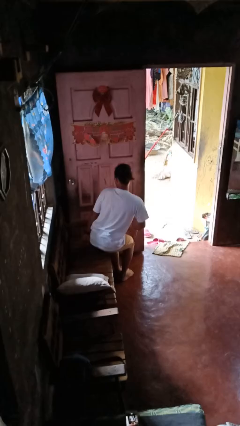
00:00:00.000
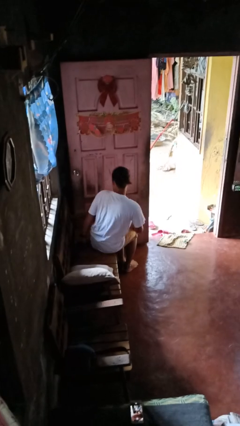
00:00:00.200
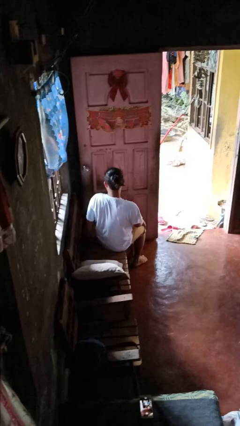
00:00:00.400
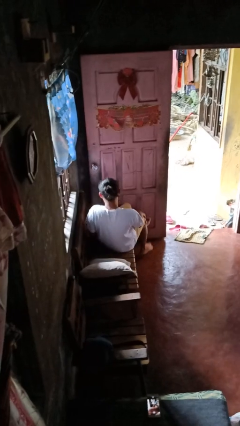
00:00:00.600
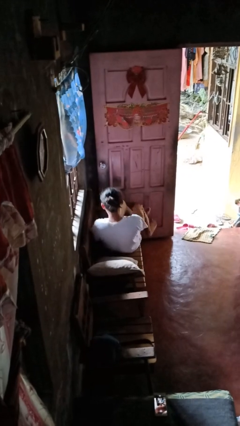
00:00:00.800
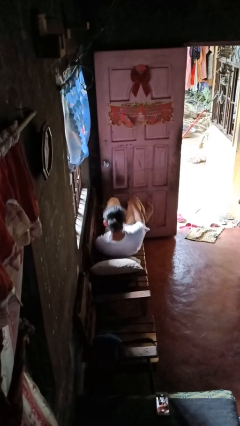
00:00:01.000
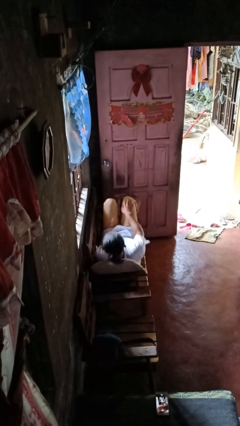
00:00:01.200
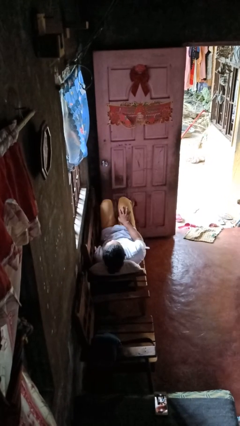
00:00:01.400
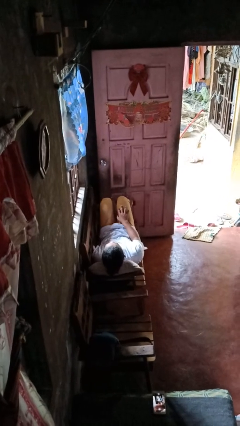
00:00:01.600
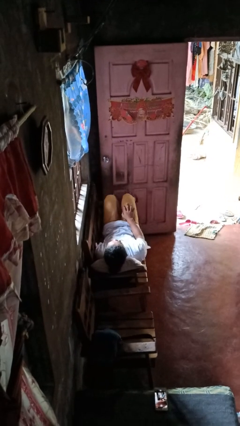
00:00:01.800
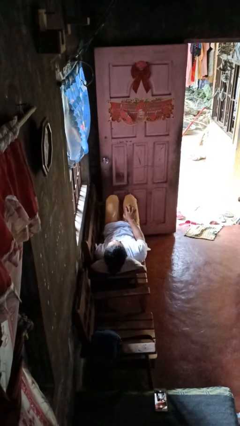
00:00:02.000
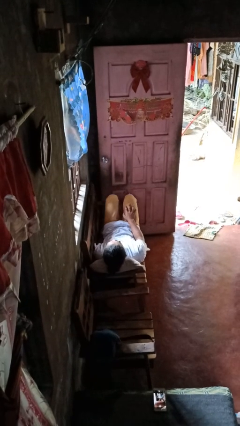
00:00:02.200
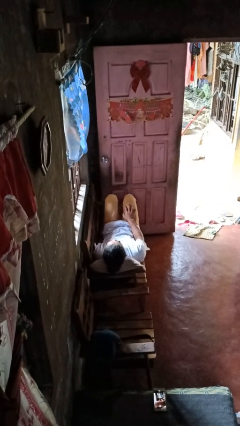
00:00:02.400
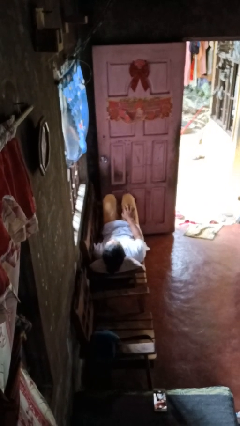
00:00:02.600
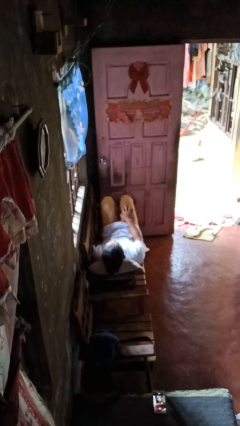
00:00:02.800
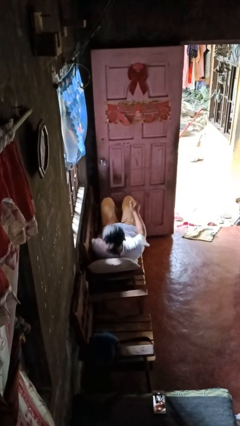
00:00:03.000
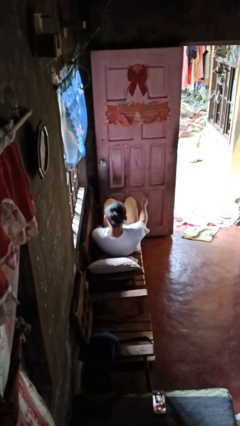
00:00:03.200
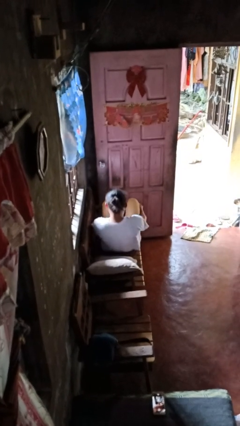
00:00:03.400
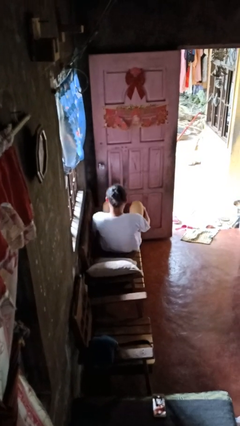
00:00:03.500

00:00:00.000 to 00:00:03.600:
person lies down on couch

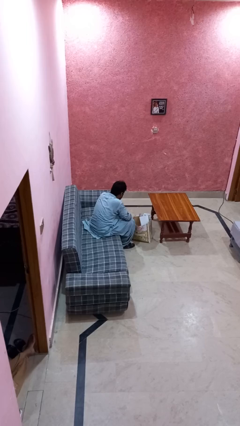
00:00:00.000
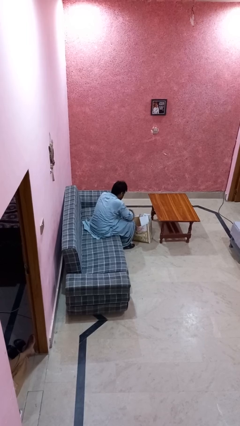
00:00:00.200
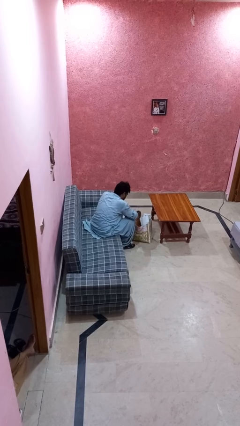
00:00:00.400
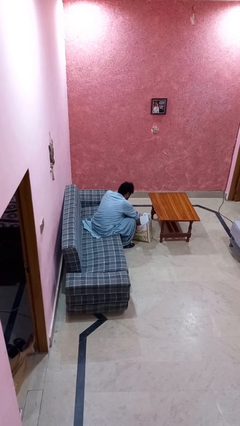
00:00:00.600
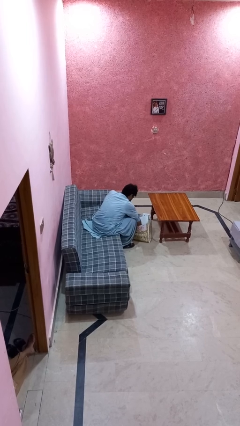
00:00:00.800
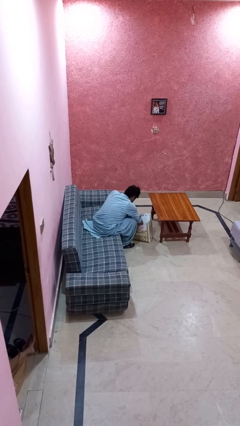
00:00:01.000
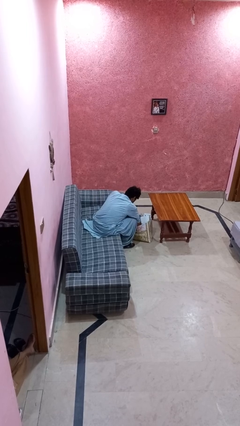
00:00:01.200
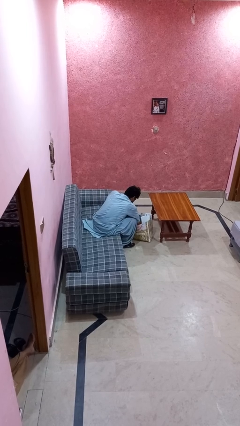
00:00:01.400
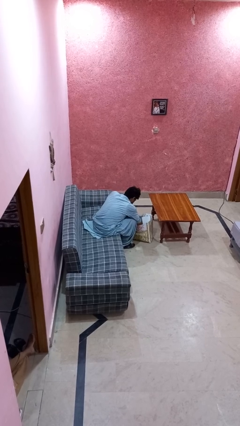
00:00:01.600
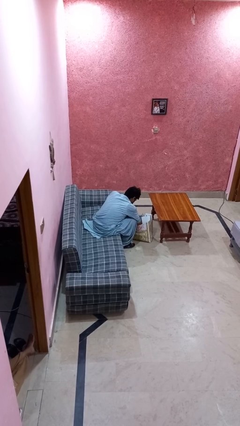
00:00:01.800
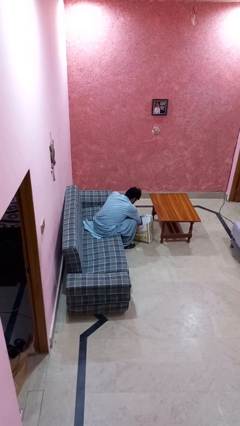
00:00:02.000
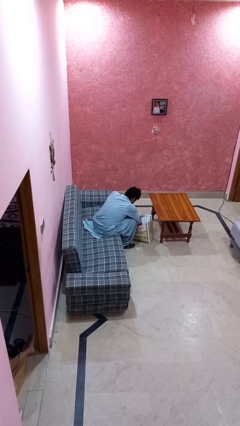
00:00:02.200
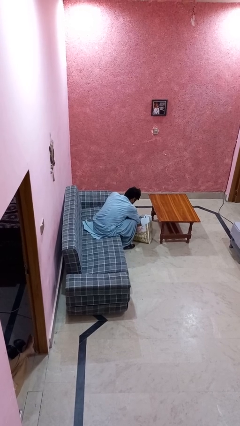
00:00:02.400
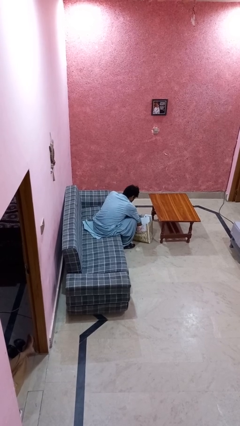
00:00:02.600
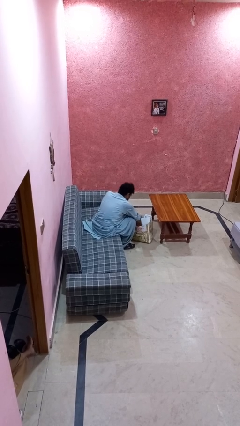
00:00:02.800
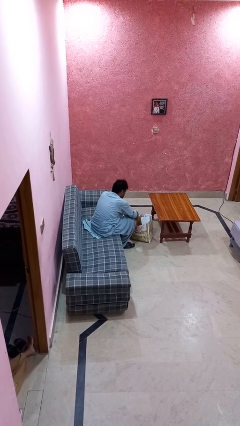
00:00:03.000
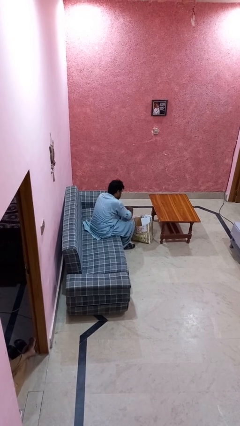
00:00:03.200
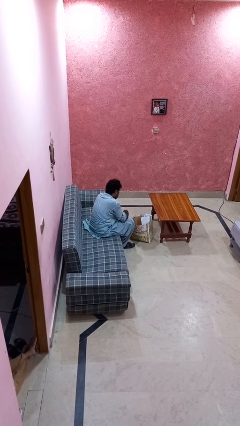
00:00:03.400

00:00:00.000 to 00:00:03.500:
person searches in bag

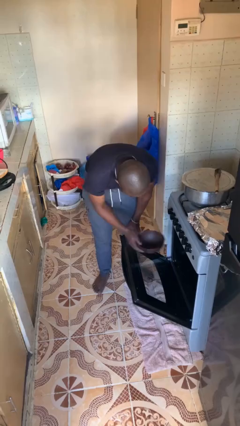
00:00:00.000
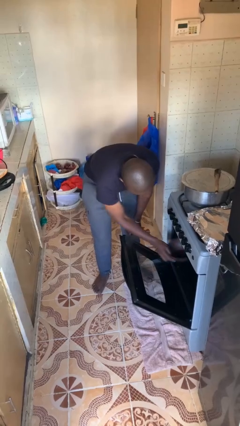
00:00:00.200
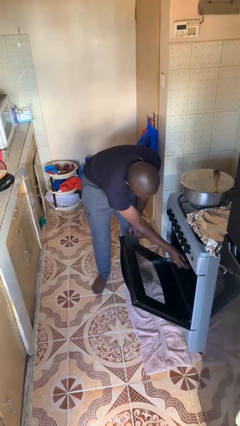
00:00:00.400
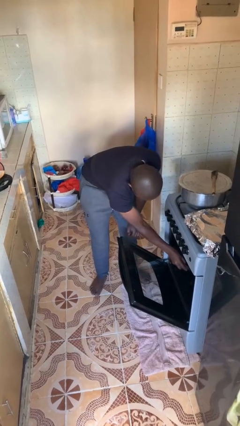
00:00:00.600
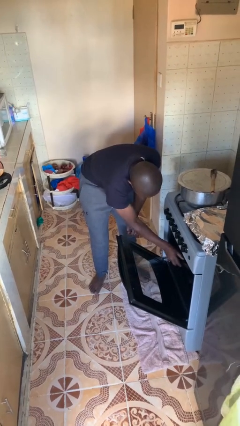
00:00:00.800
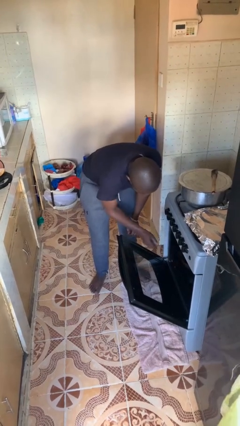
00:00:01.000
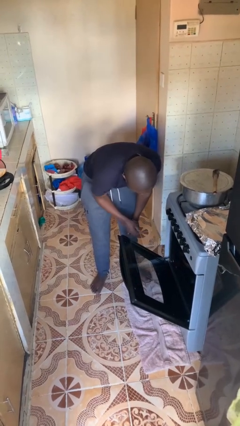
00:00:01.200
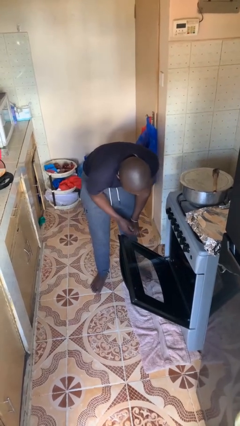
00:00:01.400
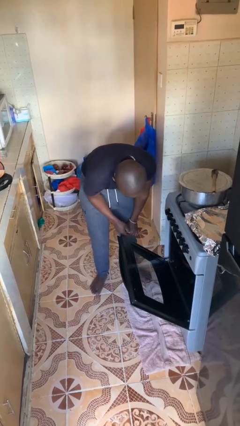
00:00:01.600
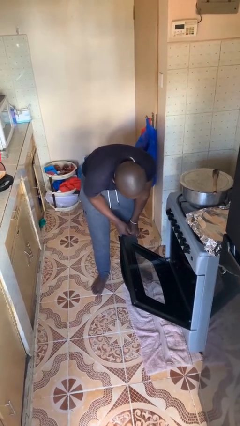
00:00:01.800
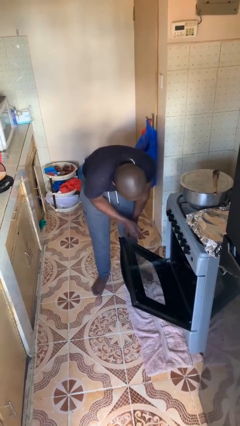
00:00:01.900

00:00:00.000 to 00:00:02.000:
person puts object into oven

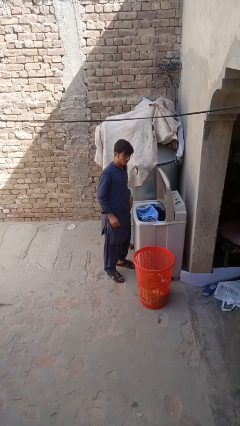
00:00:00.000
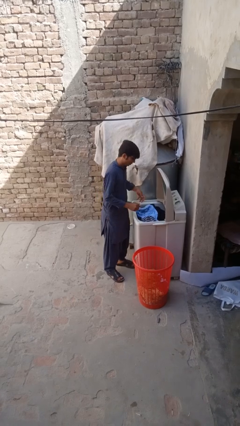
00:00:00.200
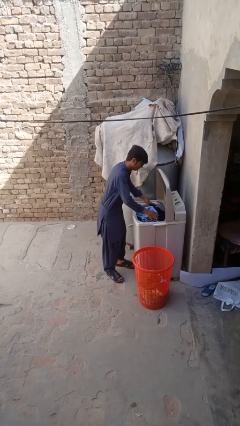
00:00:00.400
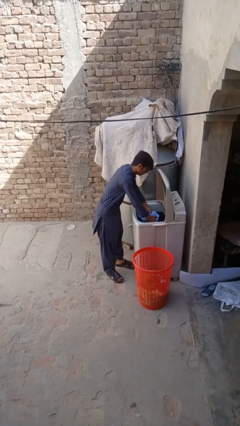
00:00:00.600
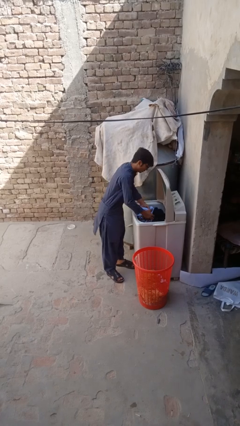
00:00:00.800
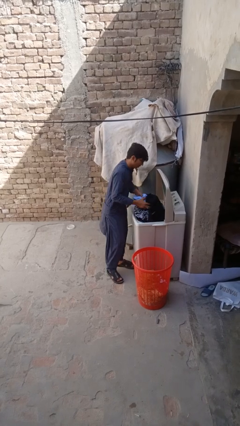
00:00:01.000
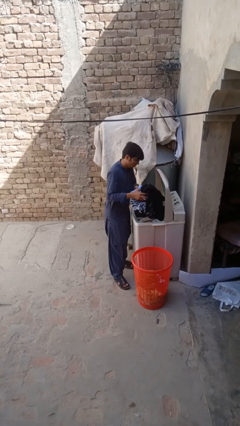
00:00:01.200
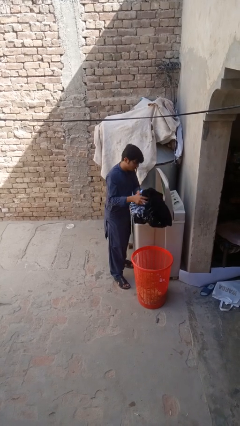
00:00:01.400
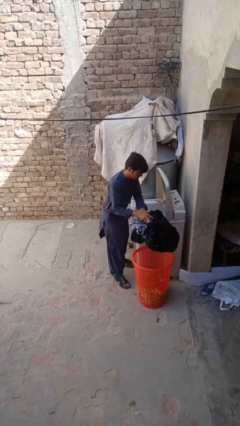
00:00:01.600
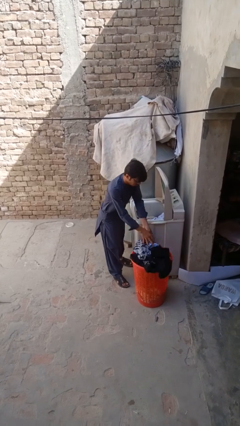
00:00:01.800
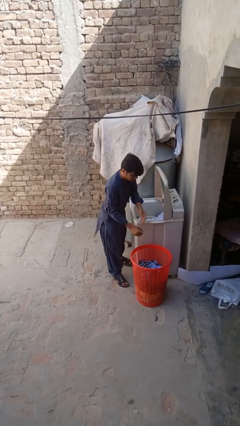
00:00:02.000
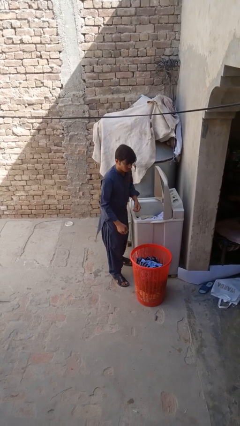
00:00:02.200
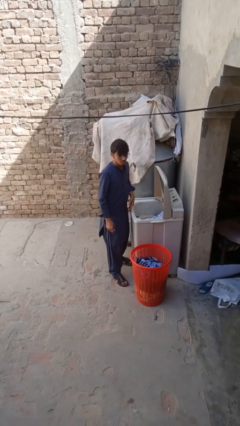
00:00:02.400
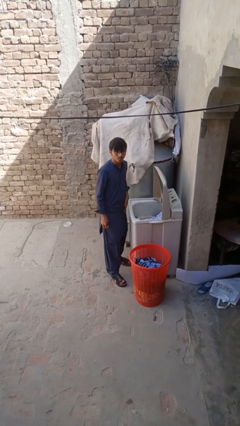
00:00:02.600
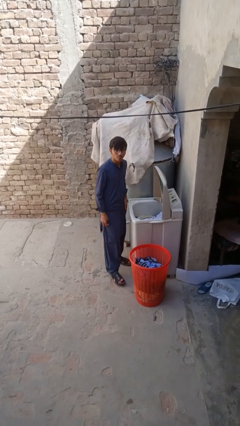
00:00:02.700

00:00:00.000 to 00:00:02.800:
person unloads clotheswasher

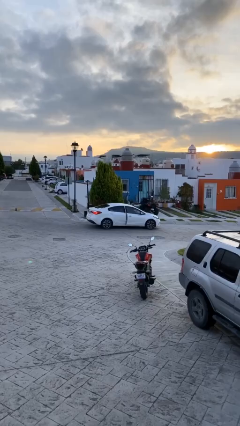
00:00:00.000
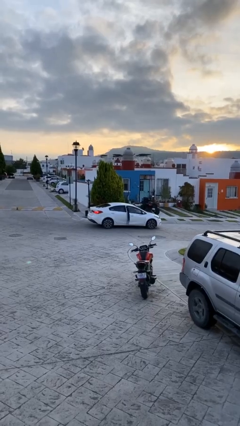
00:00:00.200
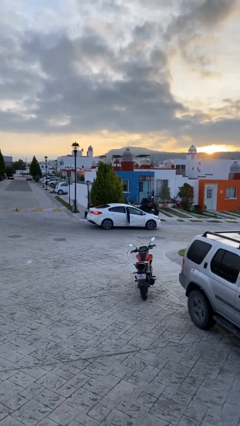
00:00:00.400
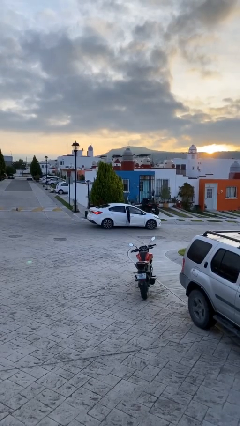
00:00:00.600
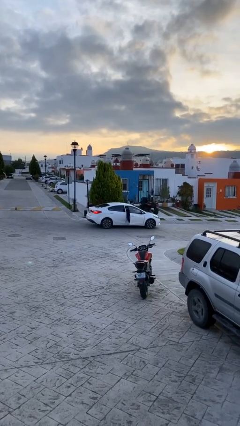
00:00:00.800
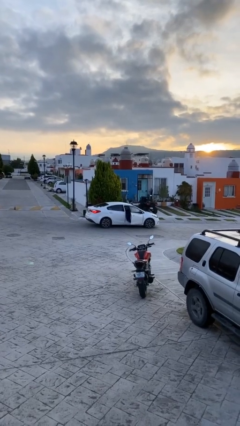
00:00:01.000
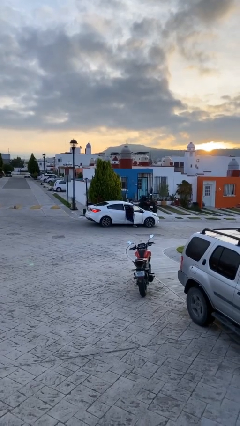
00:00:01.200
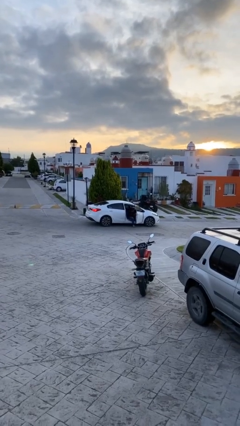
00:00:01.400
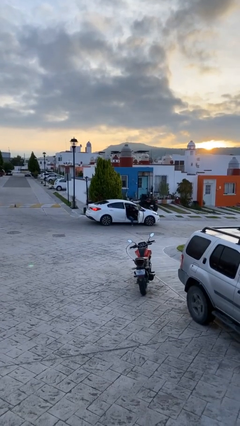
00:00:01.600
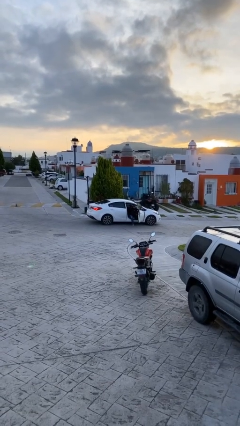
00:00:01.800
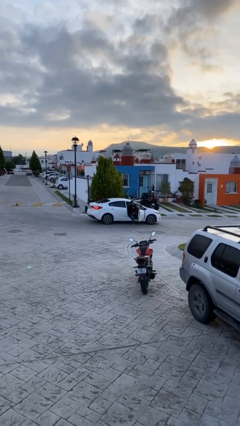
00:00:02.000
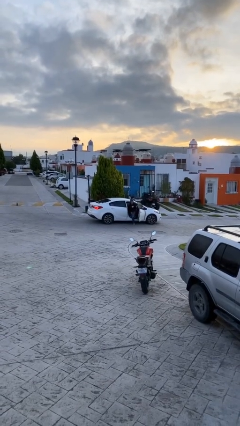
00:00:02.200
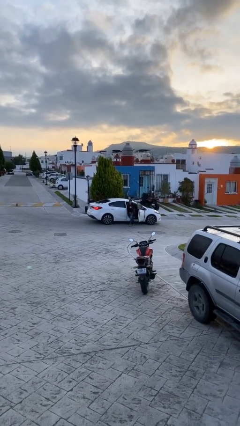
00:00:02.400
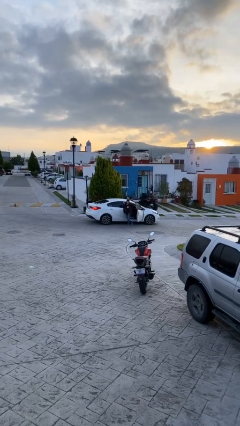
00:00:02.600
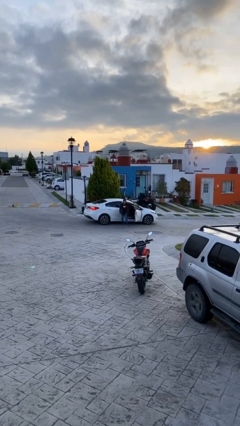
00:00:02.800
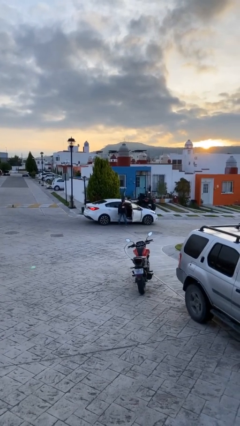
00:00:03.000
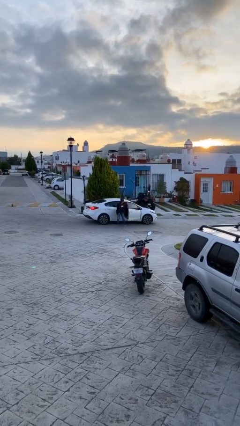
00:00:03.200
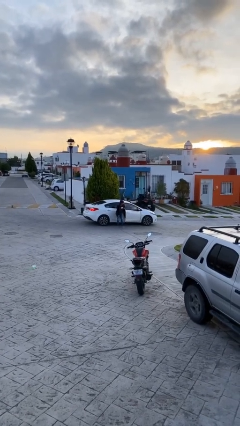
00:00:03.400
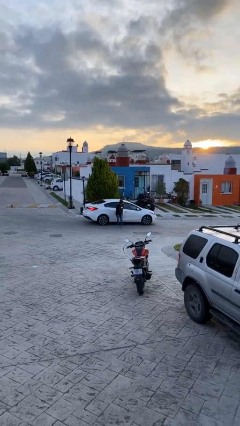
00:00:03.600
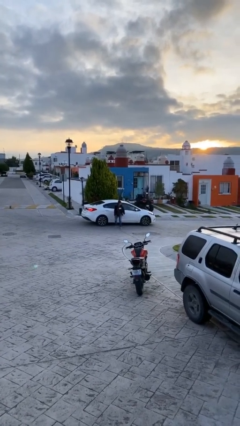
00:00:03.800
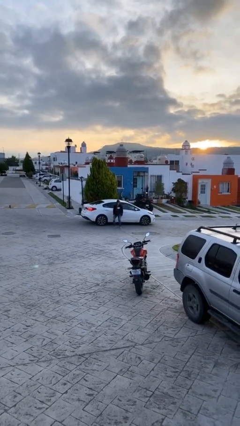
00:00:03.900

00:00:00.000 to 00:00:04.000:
car drops off person

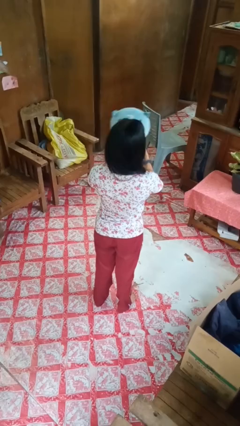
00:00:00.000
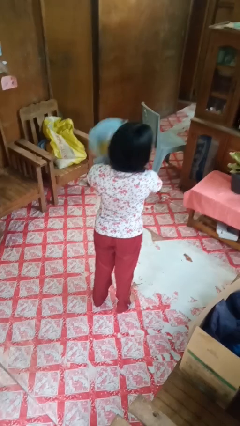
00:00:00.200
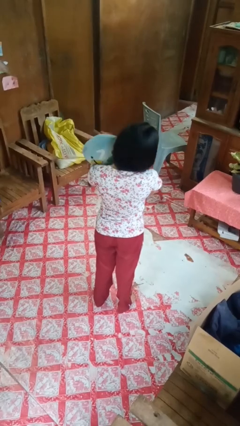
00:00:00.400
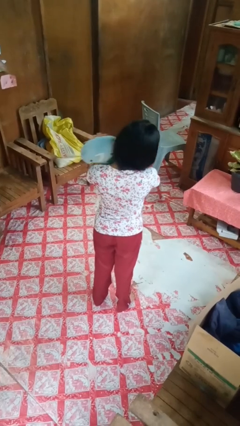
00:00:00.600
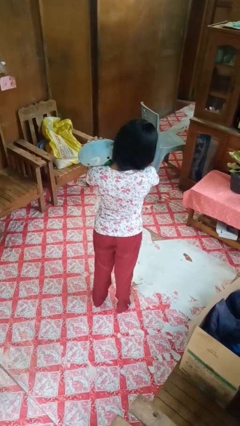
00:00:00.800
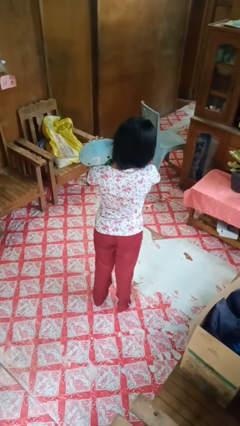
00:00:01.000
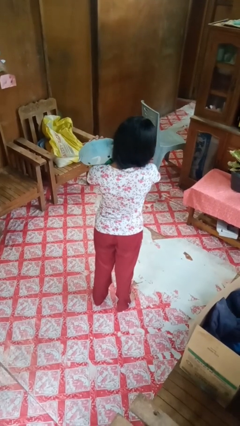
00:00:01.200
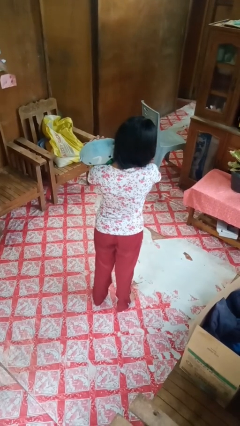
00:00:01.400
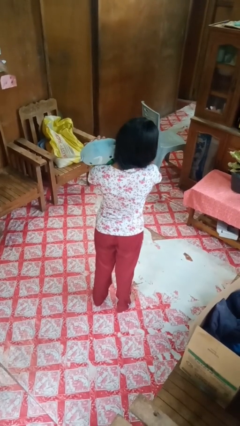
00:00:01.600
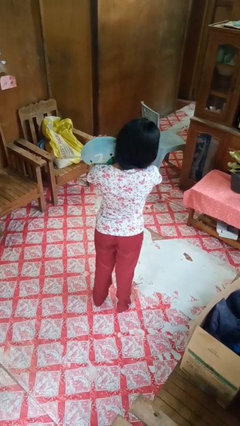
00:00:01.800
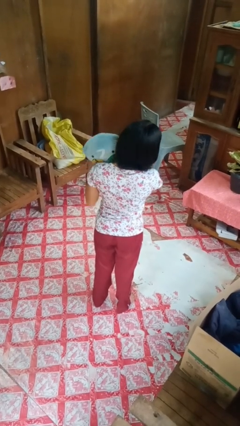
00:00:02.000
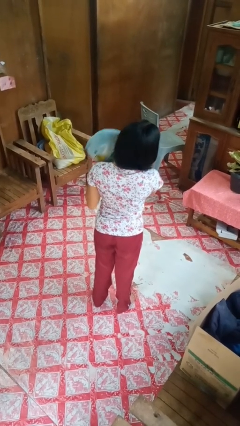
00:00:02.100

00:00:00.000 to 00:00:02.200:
person hugs stuffed animal
